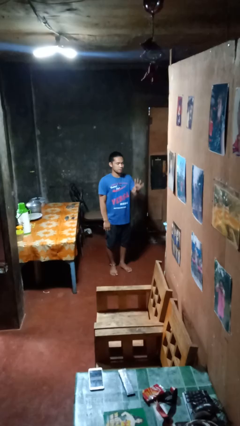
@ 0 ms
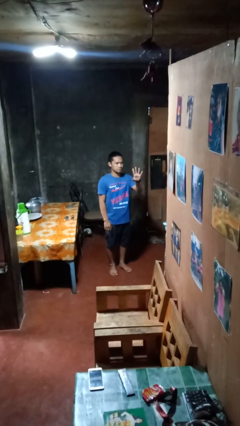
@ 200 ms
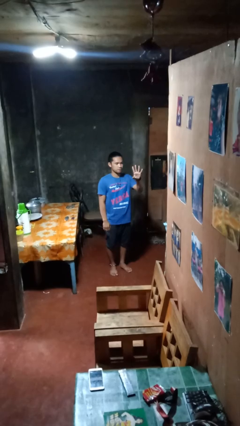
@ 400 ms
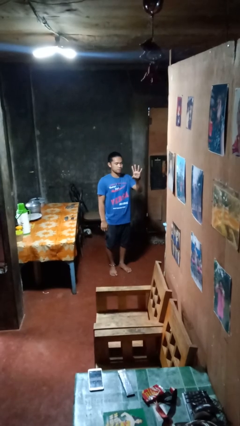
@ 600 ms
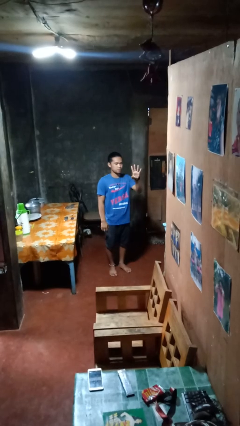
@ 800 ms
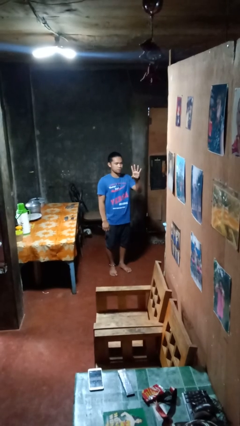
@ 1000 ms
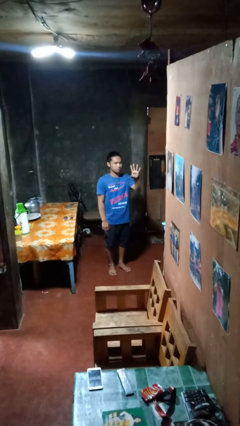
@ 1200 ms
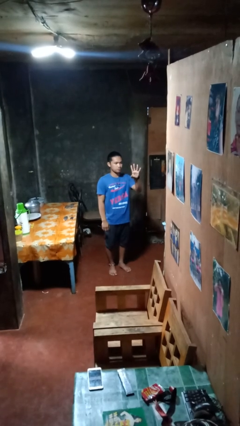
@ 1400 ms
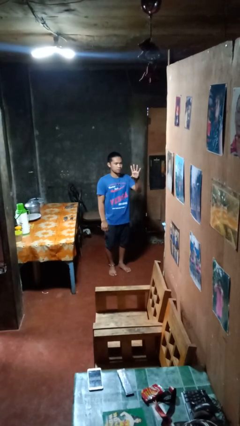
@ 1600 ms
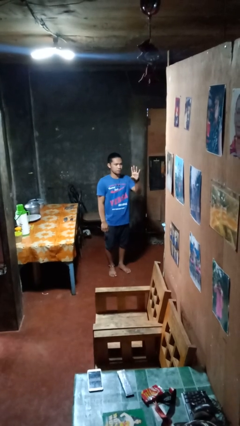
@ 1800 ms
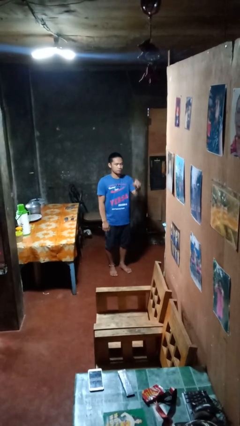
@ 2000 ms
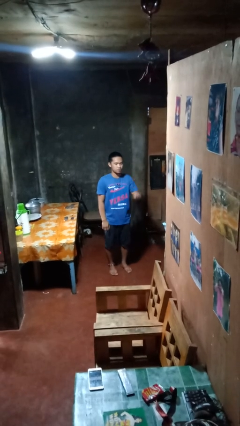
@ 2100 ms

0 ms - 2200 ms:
person gestures number four

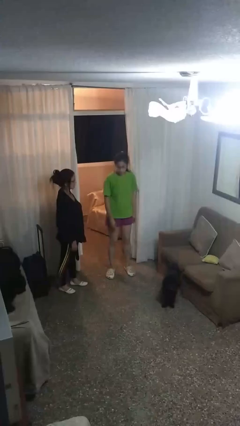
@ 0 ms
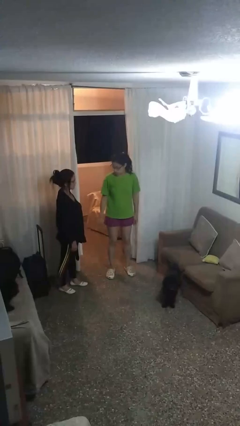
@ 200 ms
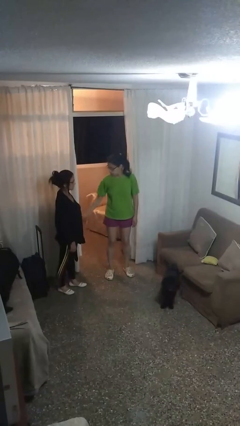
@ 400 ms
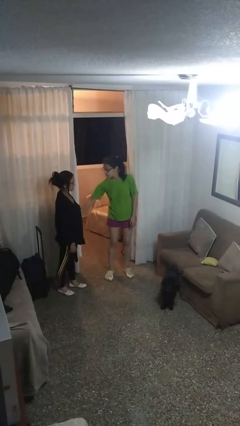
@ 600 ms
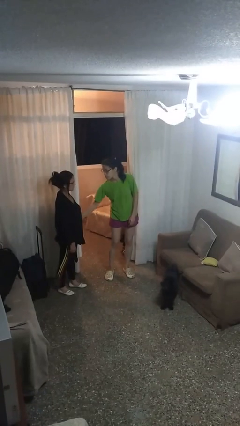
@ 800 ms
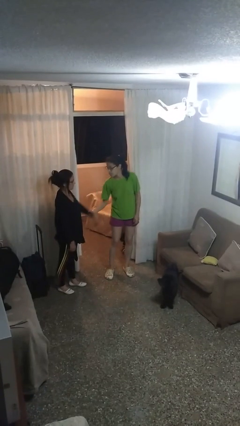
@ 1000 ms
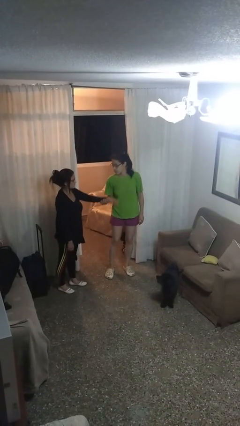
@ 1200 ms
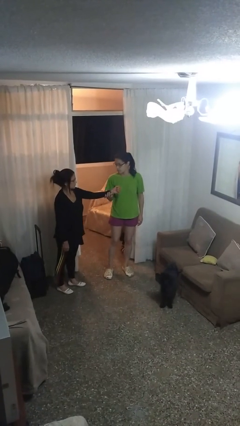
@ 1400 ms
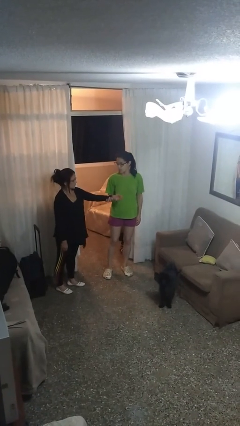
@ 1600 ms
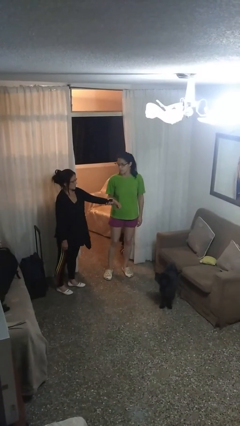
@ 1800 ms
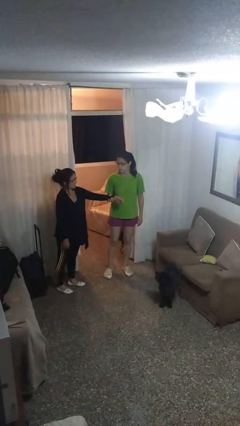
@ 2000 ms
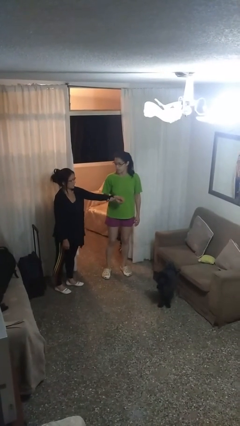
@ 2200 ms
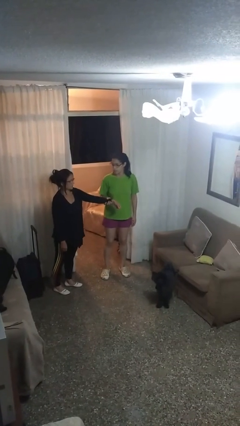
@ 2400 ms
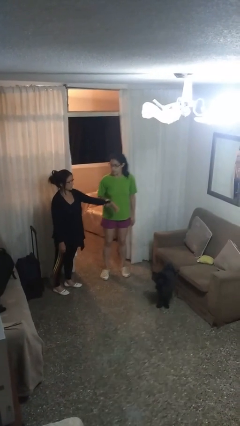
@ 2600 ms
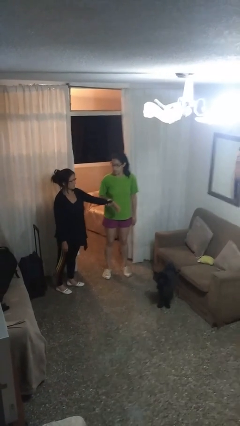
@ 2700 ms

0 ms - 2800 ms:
person grabs person by forearm

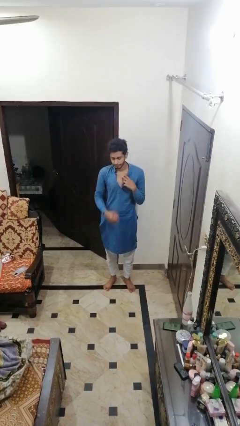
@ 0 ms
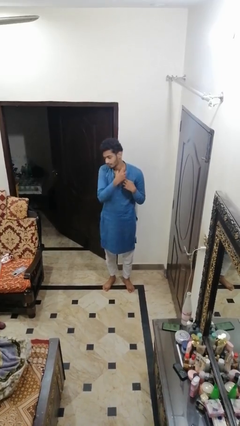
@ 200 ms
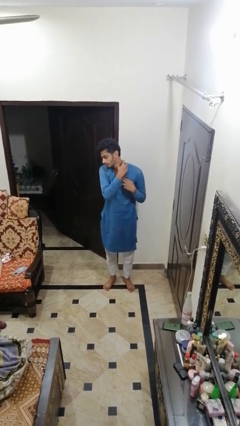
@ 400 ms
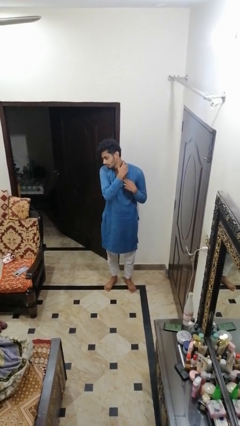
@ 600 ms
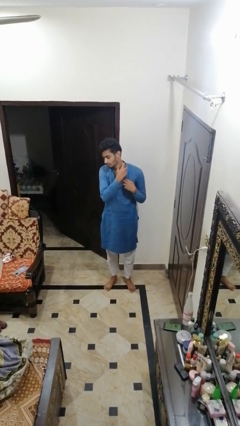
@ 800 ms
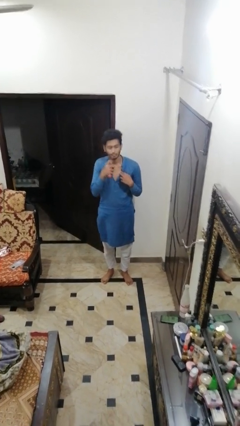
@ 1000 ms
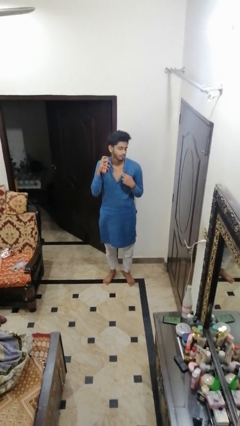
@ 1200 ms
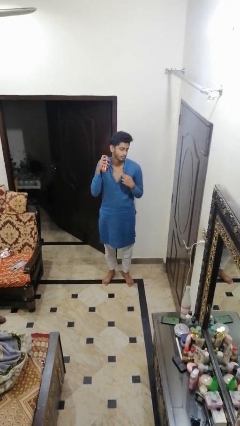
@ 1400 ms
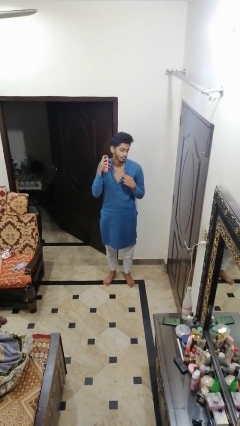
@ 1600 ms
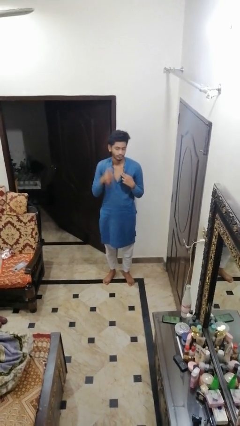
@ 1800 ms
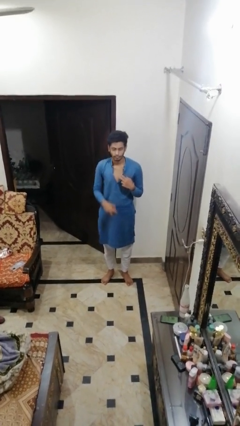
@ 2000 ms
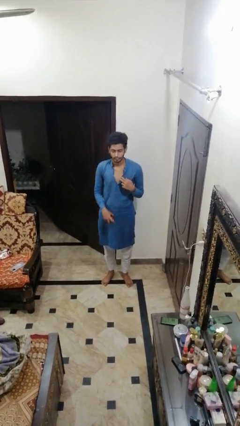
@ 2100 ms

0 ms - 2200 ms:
person applies deodorant

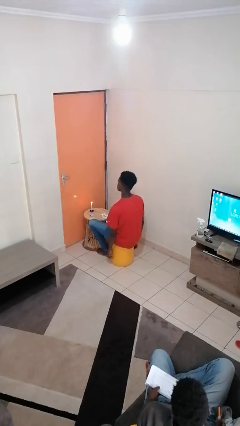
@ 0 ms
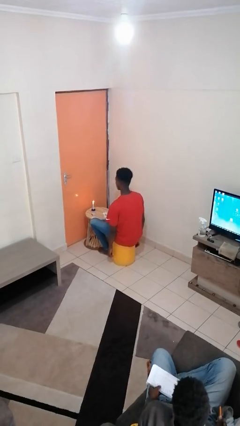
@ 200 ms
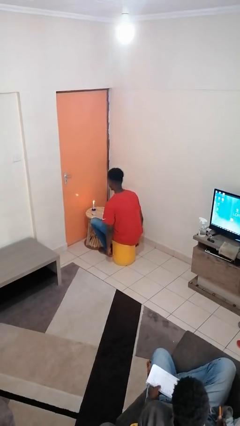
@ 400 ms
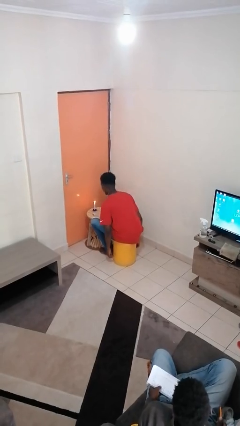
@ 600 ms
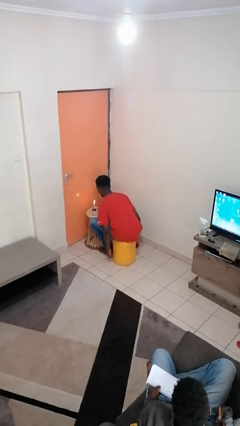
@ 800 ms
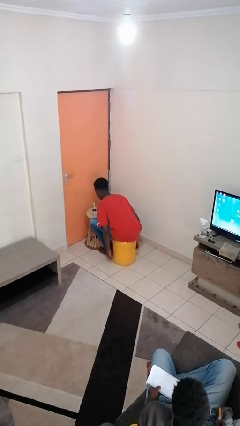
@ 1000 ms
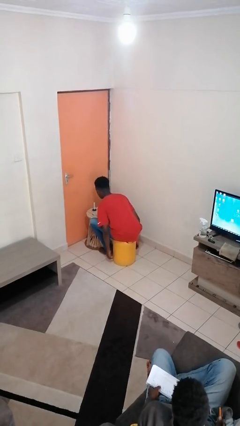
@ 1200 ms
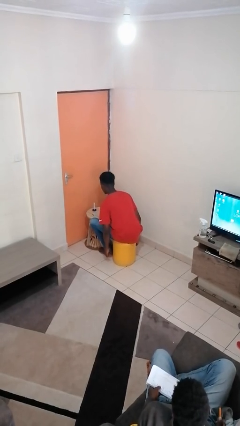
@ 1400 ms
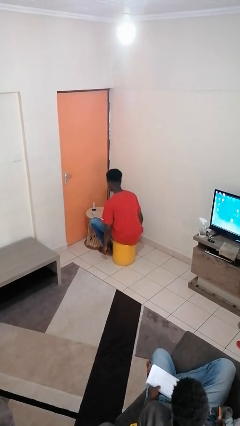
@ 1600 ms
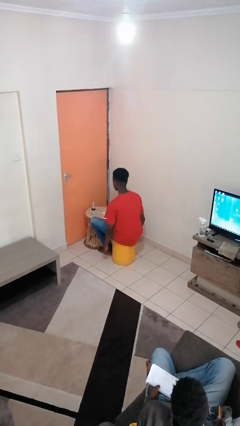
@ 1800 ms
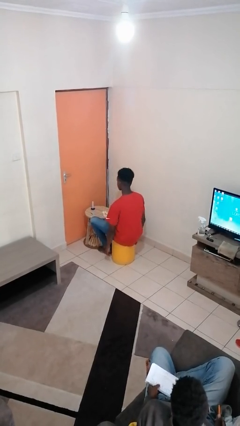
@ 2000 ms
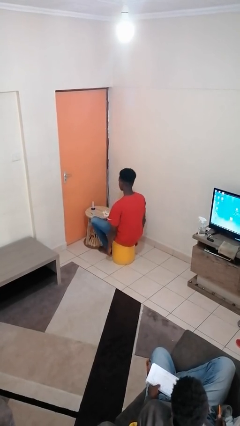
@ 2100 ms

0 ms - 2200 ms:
person extinguishes candle

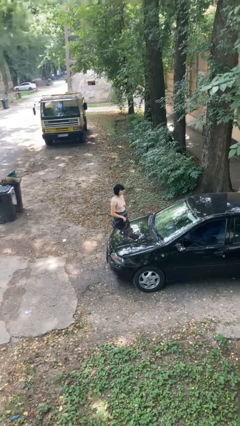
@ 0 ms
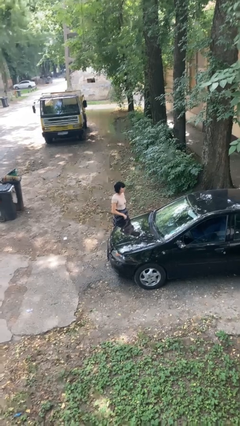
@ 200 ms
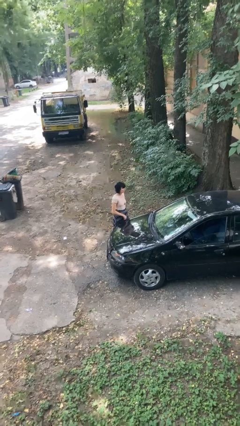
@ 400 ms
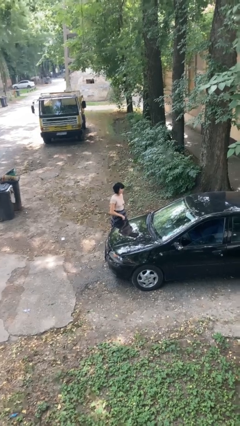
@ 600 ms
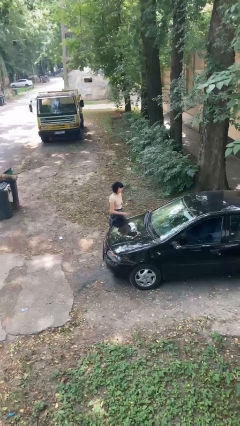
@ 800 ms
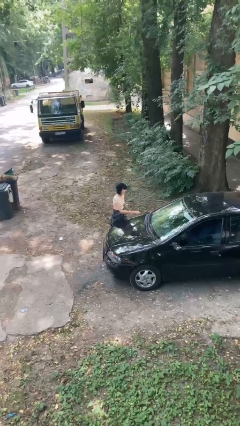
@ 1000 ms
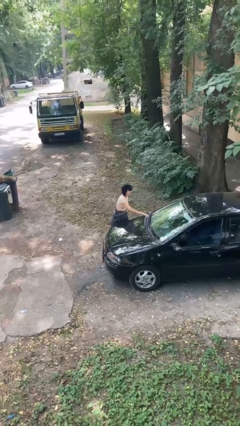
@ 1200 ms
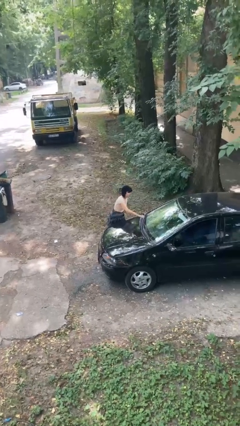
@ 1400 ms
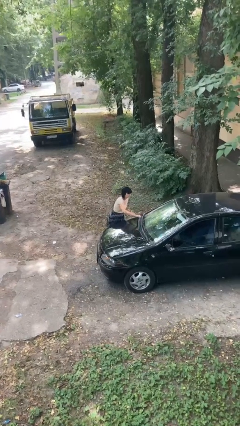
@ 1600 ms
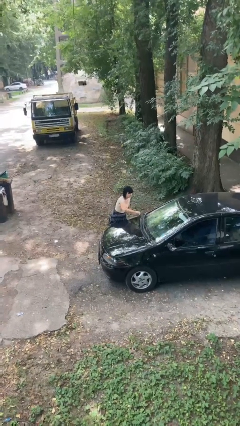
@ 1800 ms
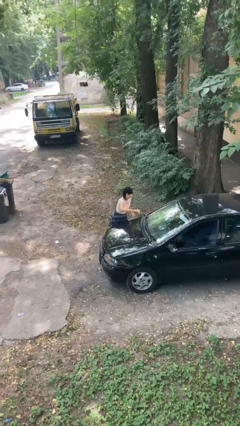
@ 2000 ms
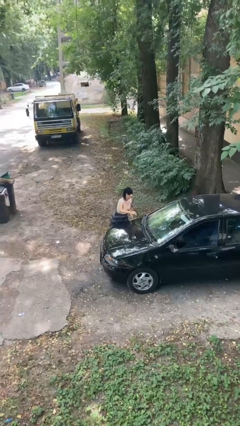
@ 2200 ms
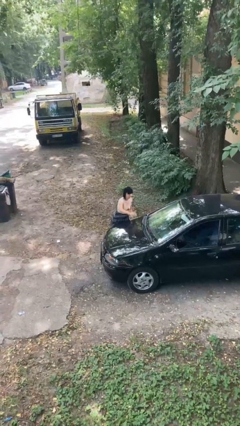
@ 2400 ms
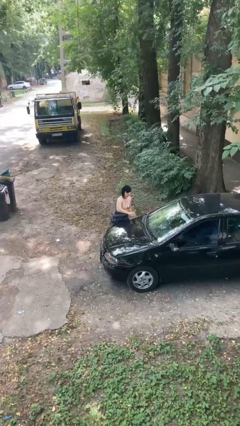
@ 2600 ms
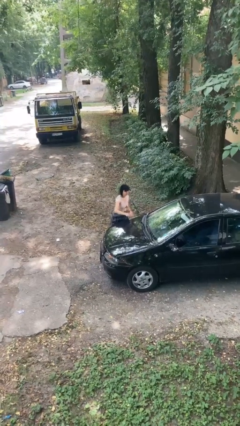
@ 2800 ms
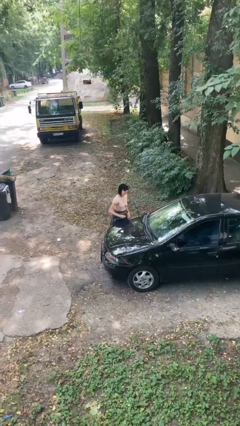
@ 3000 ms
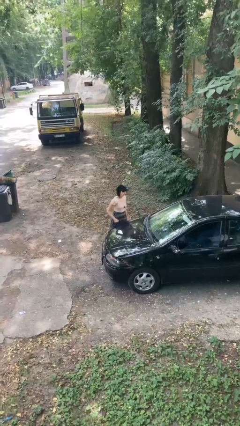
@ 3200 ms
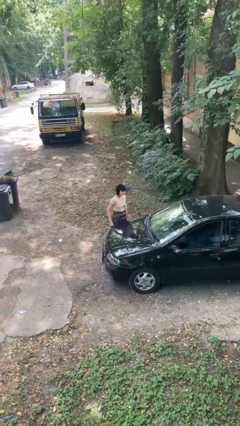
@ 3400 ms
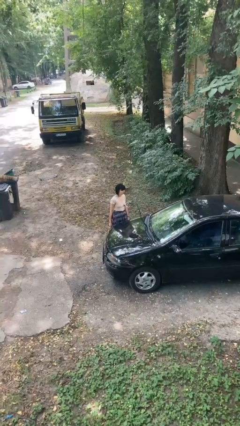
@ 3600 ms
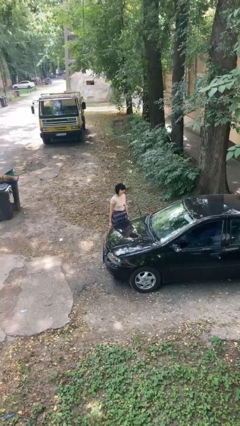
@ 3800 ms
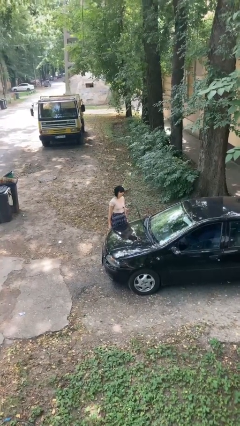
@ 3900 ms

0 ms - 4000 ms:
person flips up car wipers

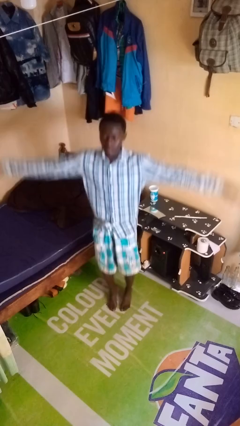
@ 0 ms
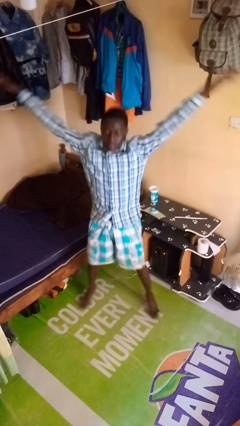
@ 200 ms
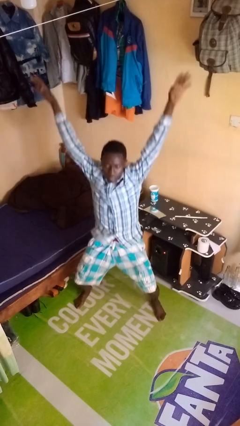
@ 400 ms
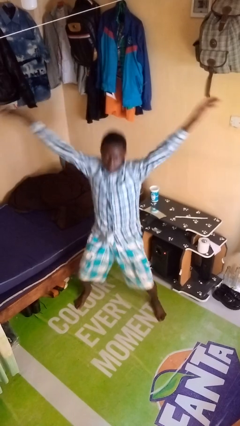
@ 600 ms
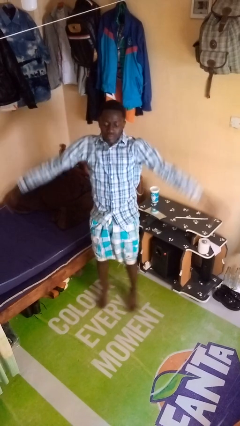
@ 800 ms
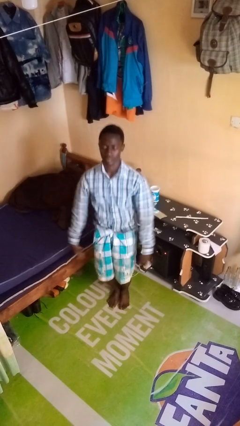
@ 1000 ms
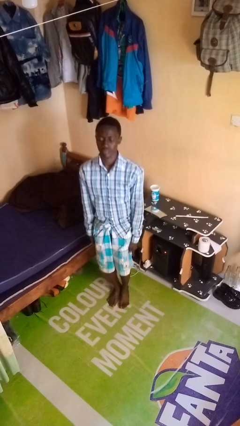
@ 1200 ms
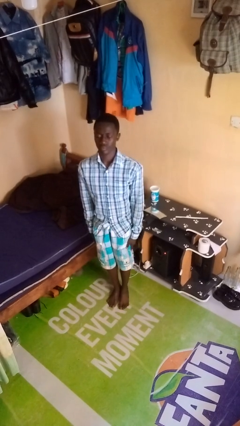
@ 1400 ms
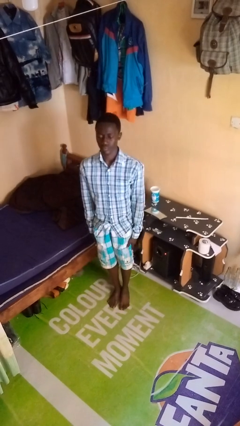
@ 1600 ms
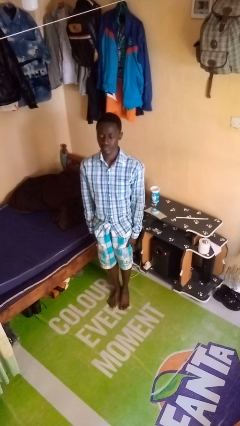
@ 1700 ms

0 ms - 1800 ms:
person exercises with jumping jacks

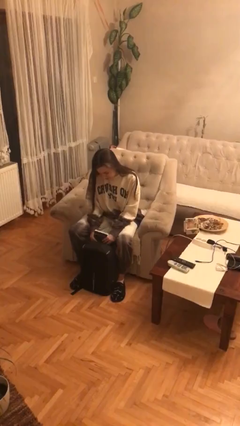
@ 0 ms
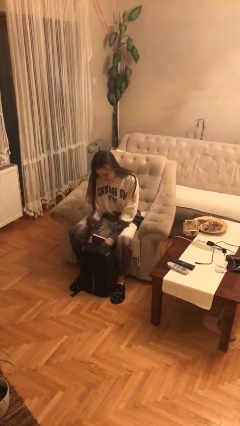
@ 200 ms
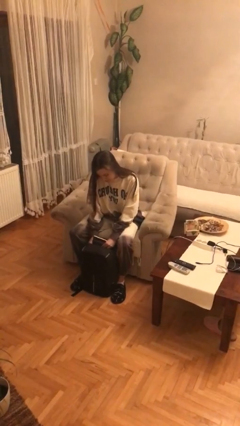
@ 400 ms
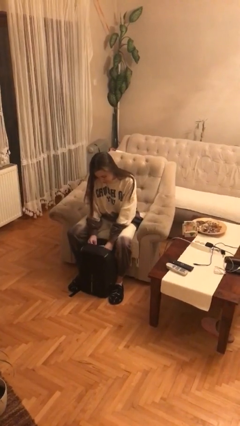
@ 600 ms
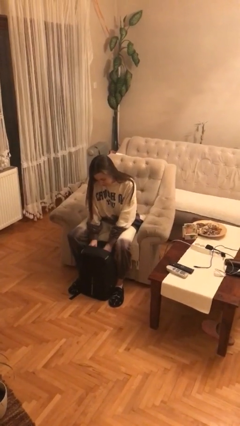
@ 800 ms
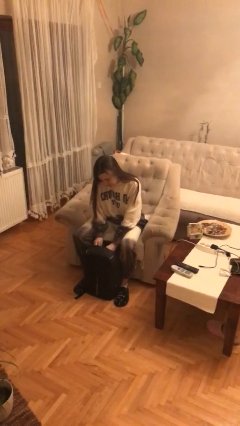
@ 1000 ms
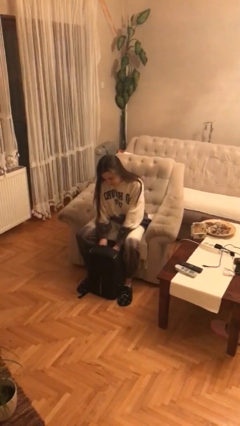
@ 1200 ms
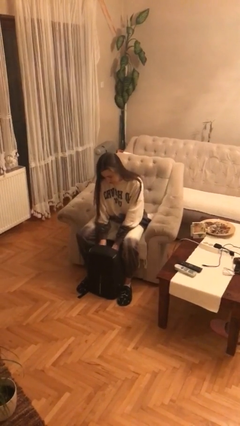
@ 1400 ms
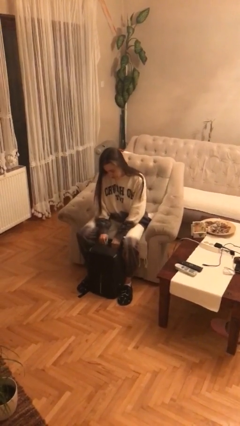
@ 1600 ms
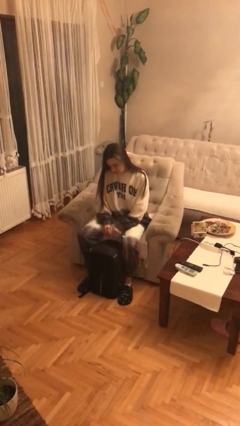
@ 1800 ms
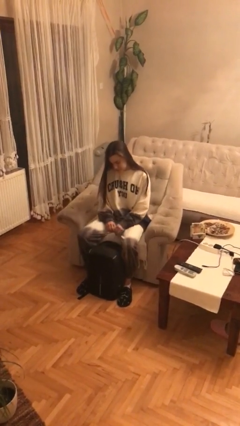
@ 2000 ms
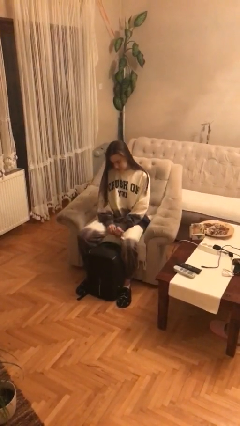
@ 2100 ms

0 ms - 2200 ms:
person puts object into backpack
